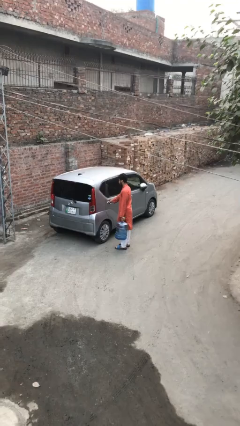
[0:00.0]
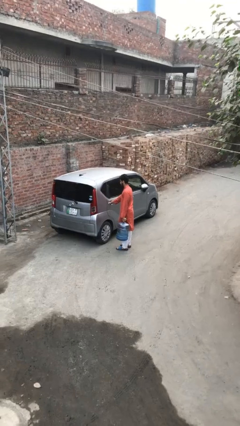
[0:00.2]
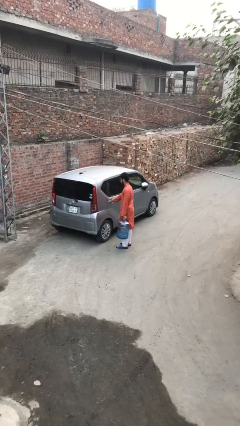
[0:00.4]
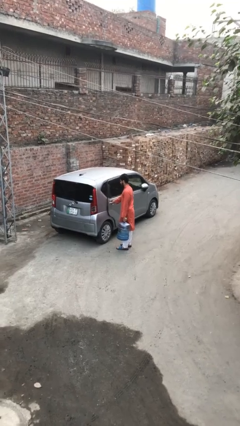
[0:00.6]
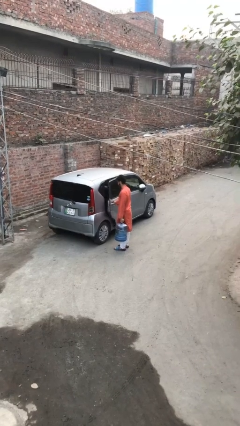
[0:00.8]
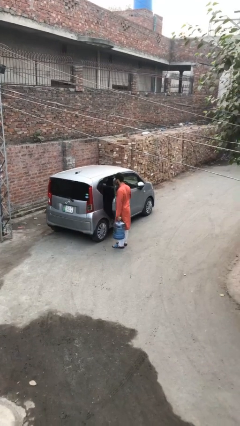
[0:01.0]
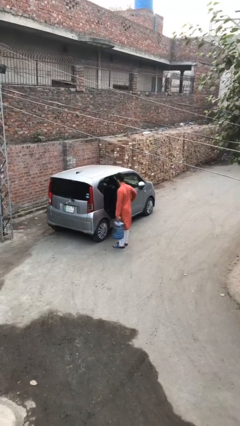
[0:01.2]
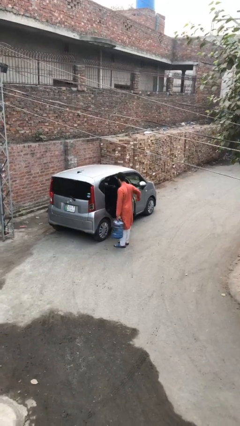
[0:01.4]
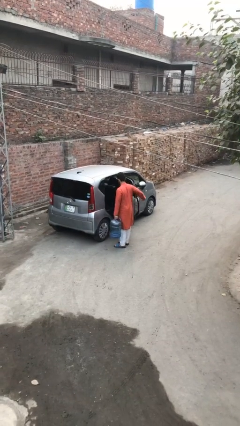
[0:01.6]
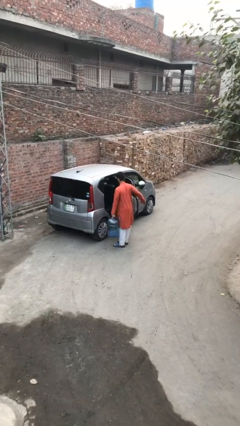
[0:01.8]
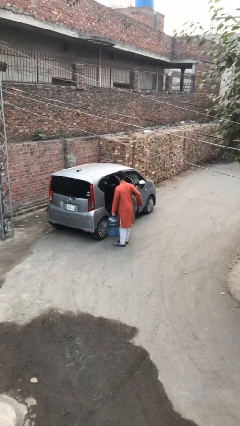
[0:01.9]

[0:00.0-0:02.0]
person opens car door

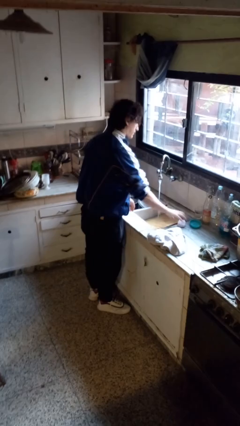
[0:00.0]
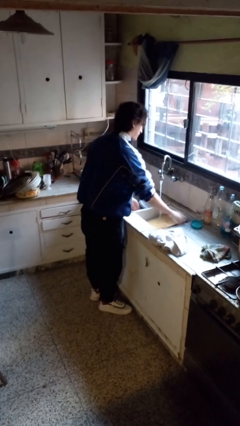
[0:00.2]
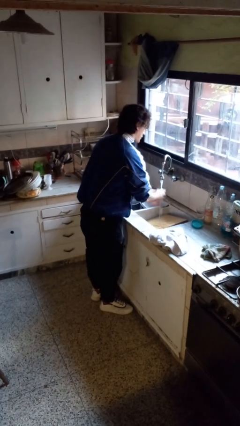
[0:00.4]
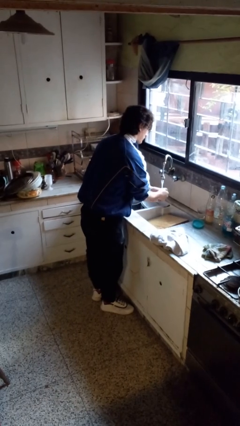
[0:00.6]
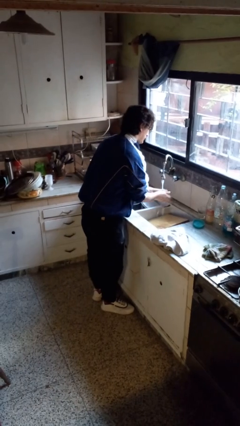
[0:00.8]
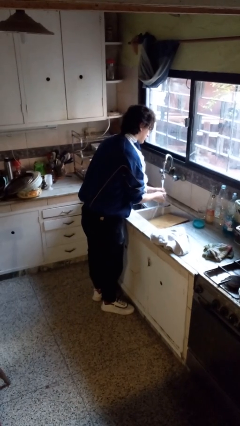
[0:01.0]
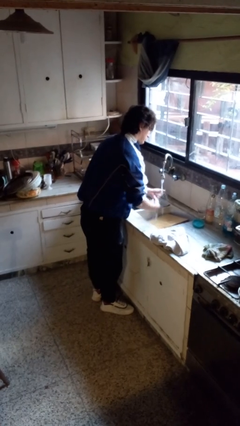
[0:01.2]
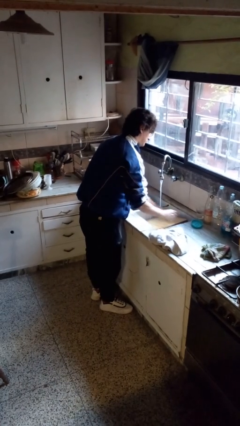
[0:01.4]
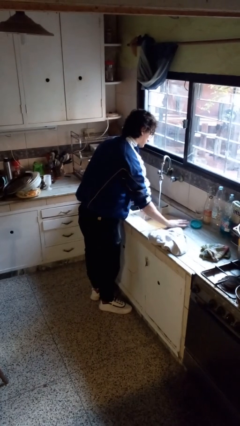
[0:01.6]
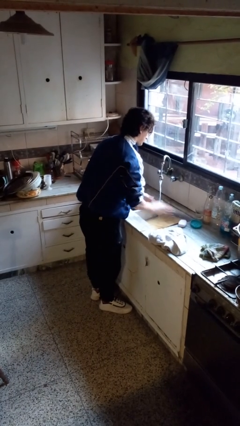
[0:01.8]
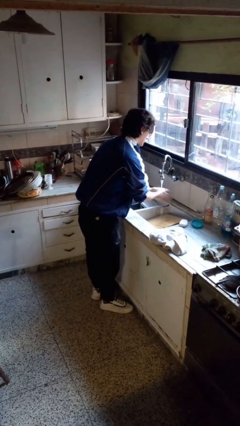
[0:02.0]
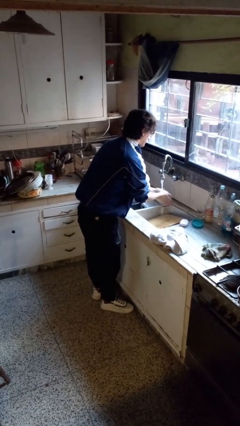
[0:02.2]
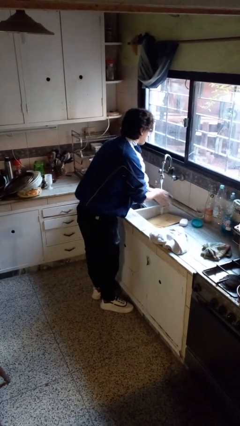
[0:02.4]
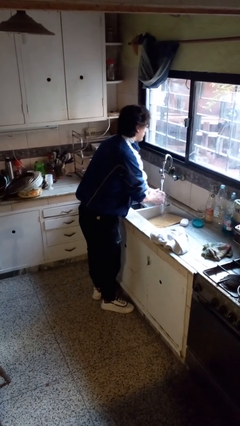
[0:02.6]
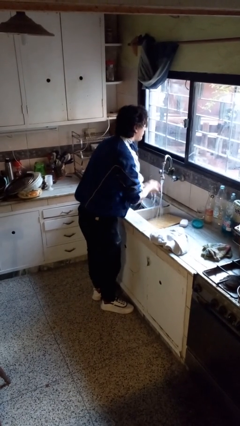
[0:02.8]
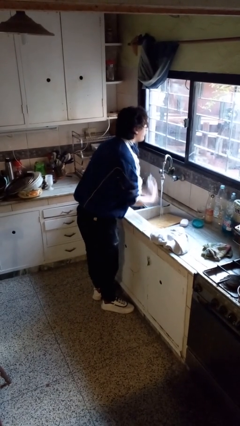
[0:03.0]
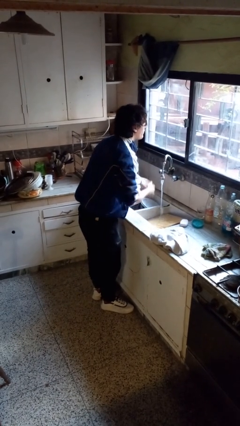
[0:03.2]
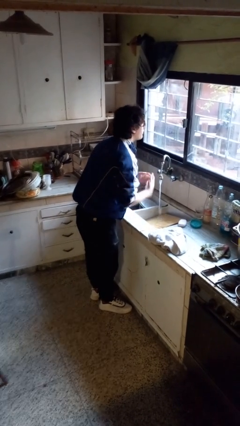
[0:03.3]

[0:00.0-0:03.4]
person washes hands

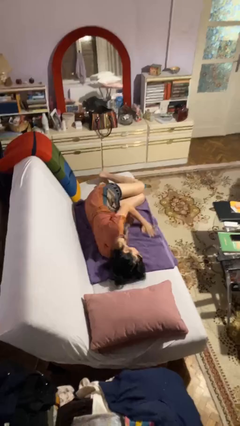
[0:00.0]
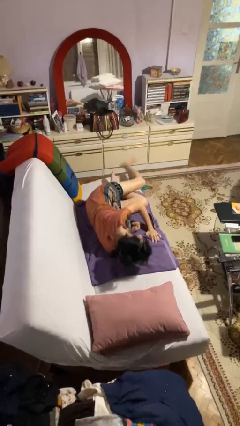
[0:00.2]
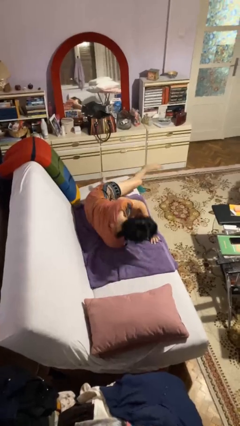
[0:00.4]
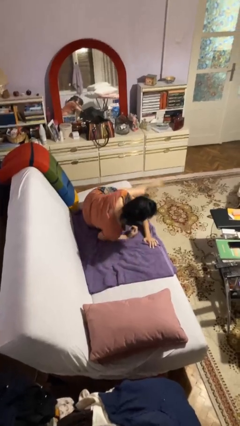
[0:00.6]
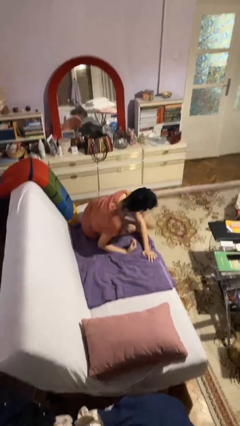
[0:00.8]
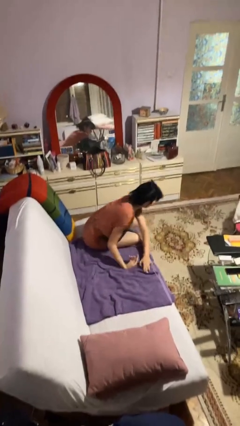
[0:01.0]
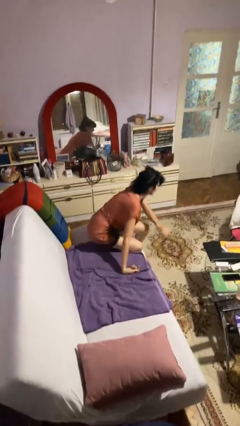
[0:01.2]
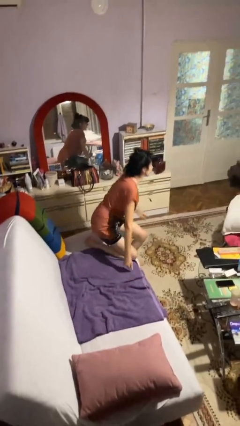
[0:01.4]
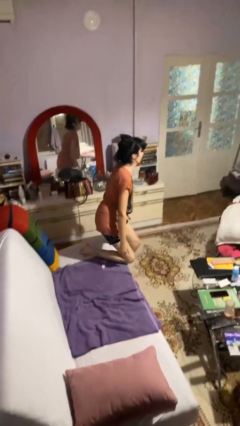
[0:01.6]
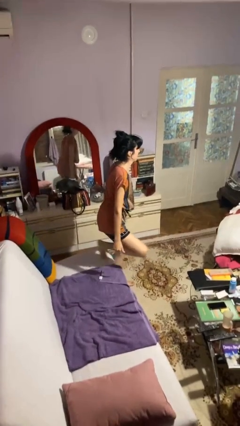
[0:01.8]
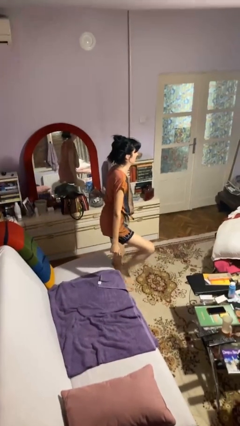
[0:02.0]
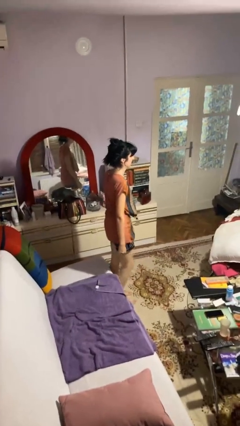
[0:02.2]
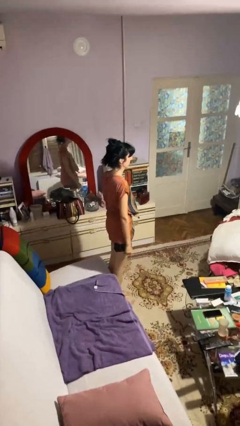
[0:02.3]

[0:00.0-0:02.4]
person stands up

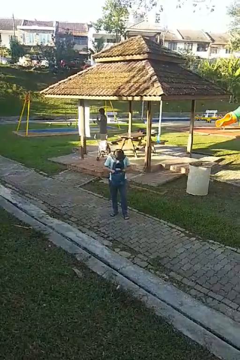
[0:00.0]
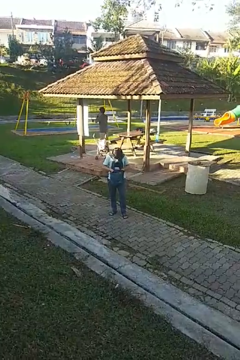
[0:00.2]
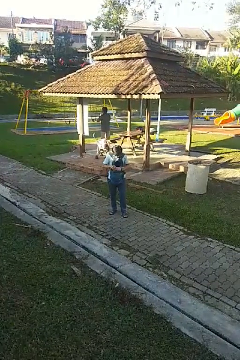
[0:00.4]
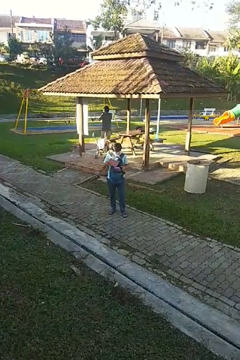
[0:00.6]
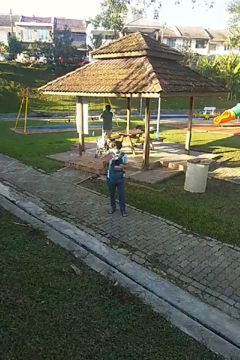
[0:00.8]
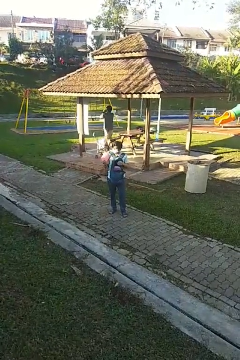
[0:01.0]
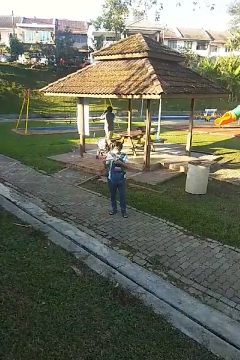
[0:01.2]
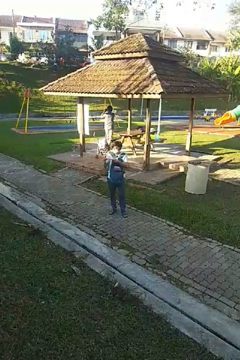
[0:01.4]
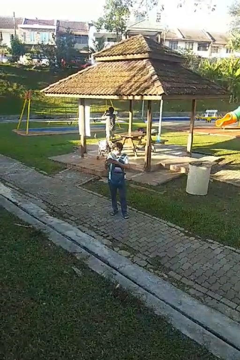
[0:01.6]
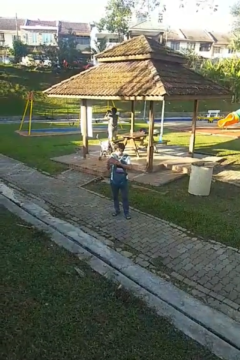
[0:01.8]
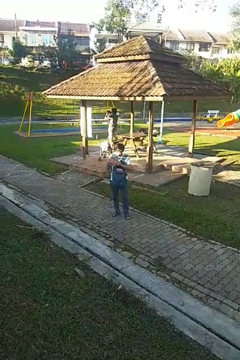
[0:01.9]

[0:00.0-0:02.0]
person takes object from backpack

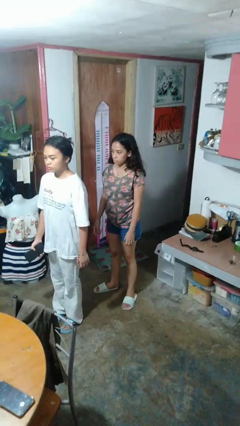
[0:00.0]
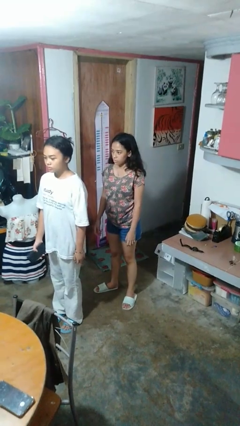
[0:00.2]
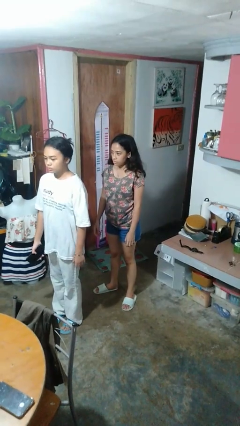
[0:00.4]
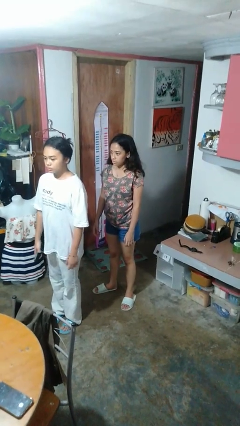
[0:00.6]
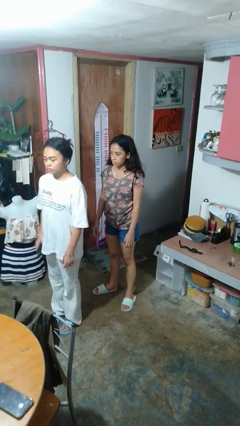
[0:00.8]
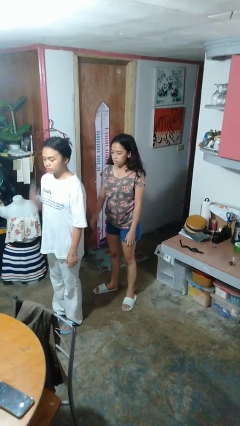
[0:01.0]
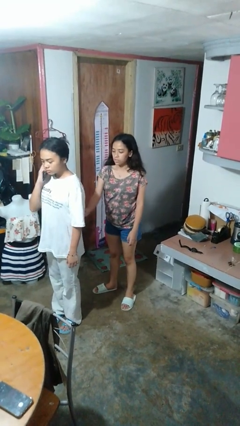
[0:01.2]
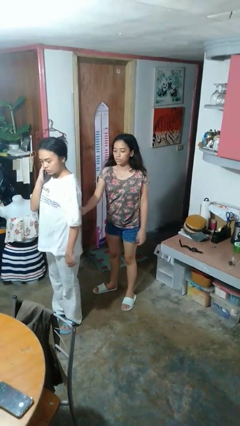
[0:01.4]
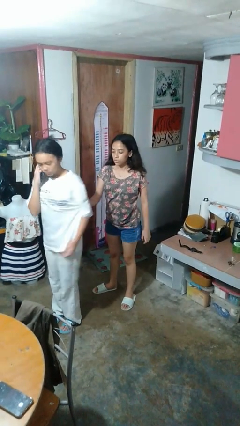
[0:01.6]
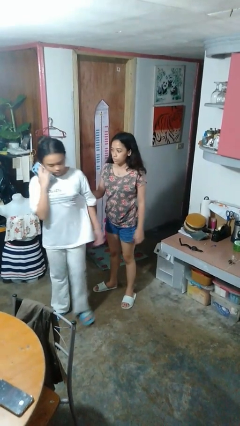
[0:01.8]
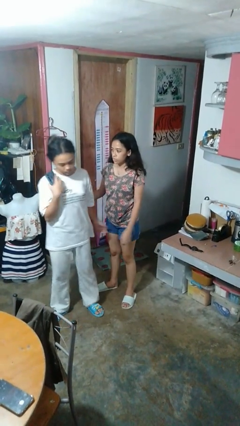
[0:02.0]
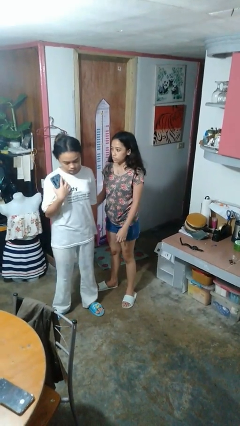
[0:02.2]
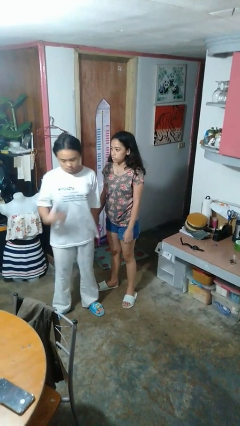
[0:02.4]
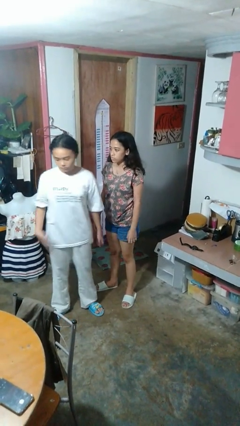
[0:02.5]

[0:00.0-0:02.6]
person grabs person by bicep

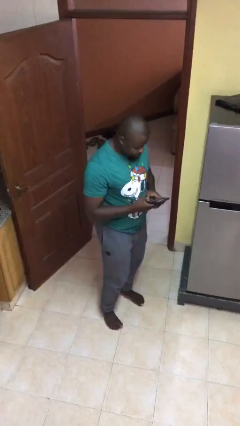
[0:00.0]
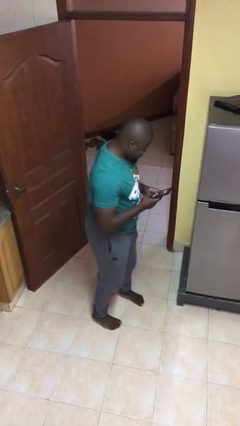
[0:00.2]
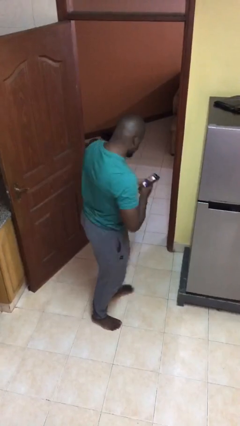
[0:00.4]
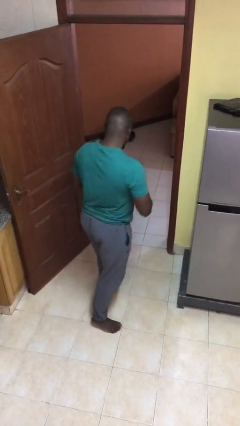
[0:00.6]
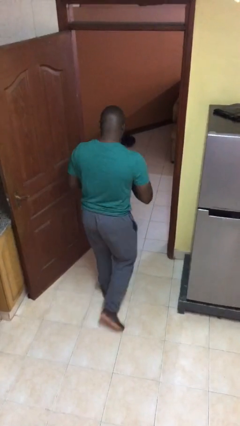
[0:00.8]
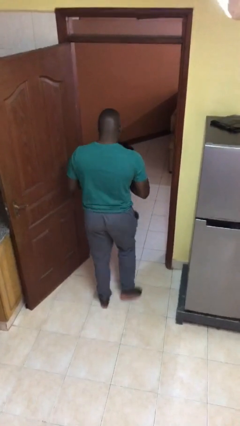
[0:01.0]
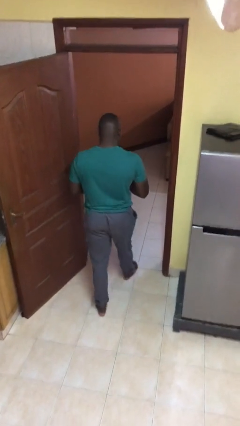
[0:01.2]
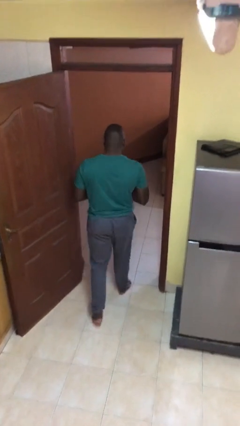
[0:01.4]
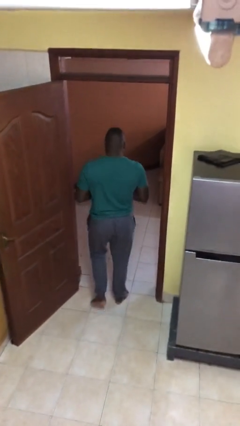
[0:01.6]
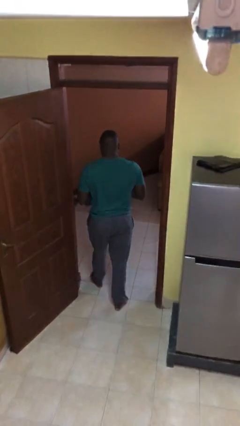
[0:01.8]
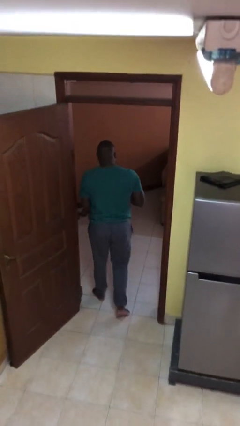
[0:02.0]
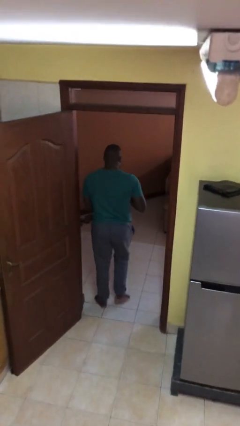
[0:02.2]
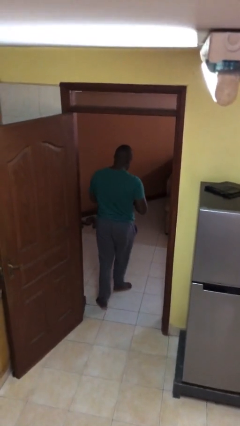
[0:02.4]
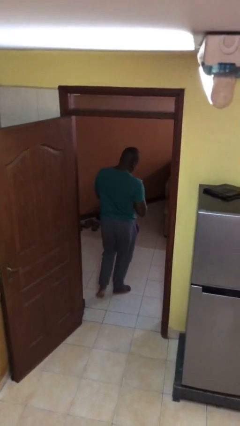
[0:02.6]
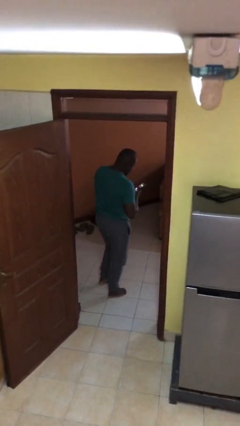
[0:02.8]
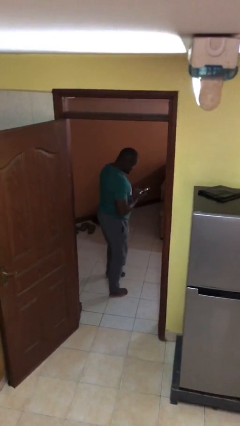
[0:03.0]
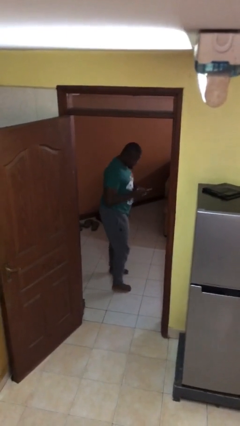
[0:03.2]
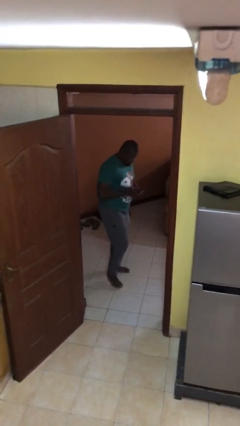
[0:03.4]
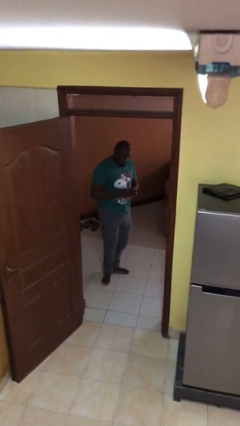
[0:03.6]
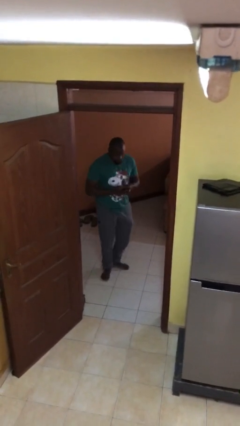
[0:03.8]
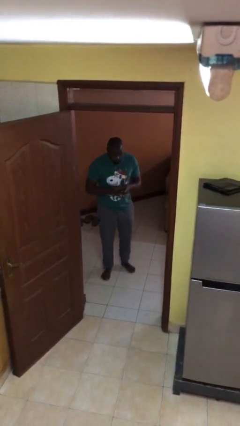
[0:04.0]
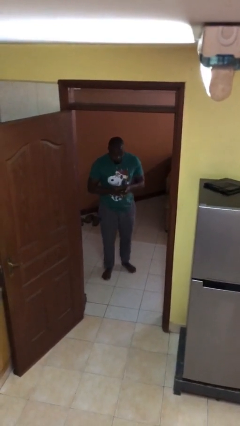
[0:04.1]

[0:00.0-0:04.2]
person exits scene through structure

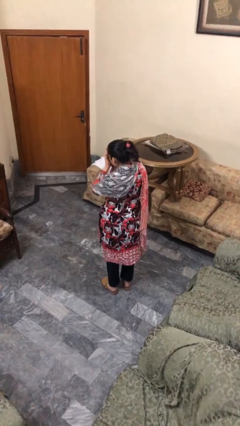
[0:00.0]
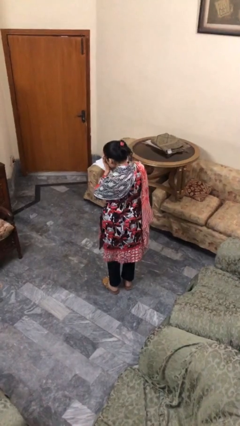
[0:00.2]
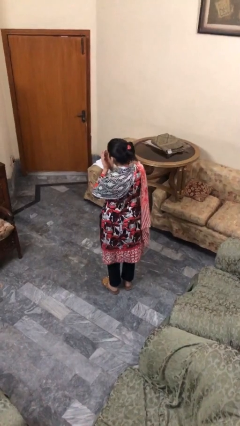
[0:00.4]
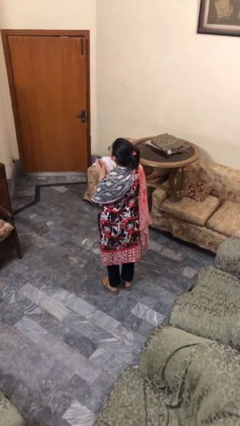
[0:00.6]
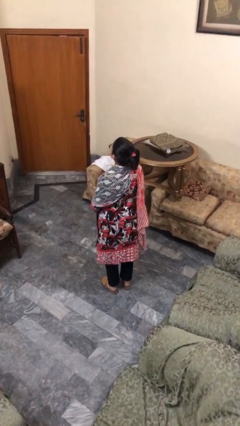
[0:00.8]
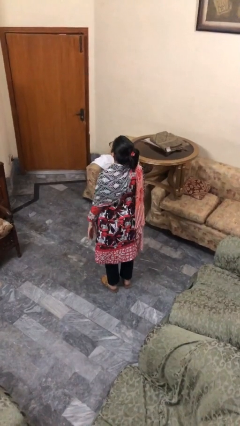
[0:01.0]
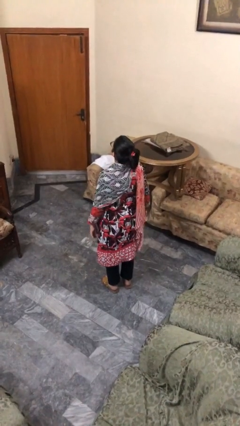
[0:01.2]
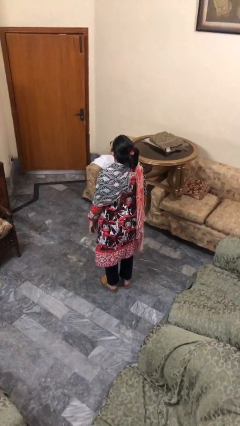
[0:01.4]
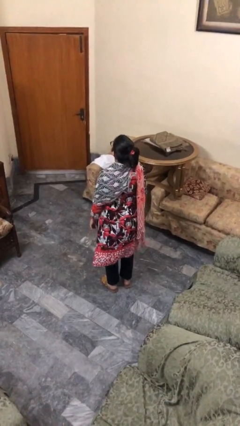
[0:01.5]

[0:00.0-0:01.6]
person sneezes into hand
